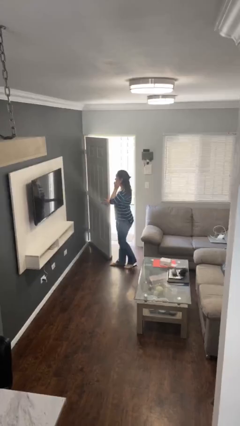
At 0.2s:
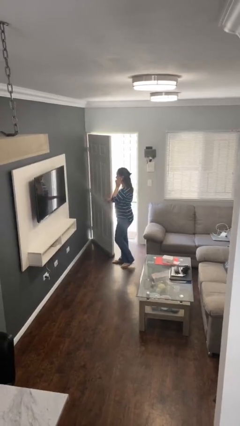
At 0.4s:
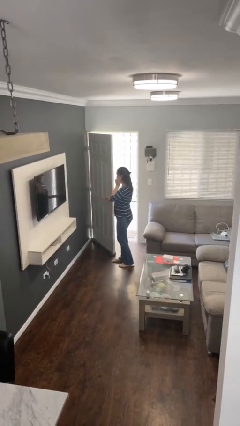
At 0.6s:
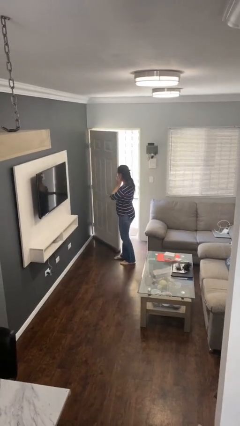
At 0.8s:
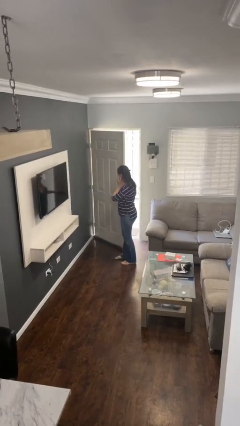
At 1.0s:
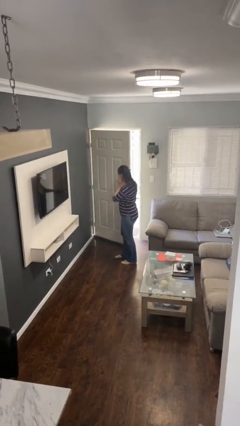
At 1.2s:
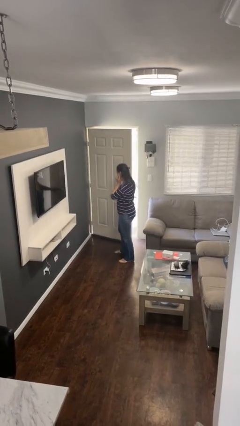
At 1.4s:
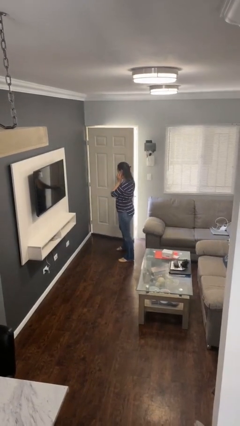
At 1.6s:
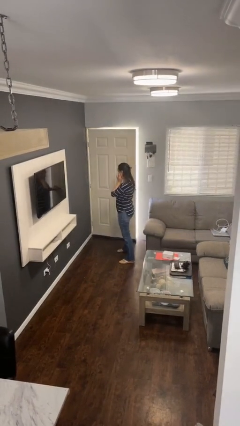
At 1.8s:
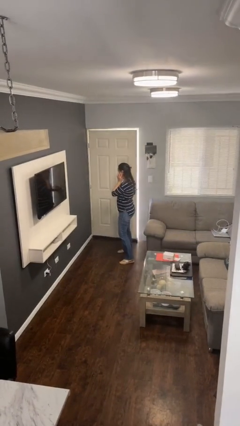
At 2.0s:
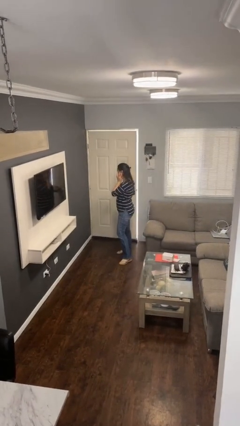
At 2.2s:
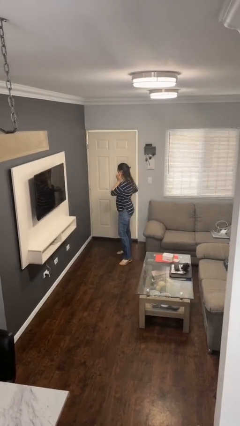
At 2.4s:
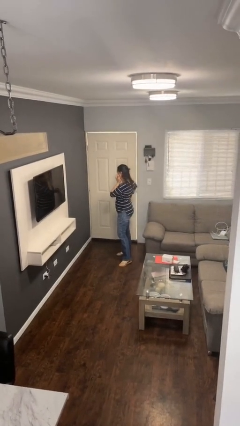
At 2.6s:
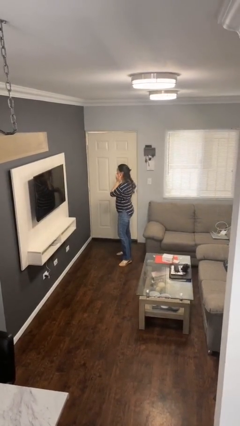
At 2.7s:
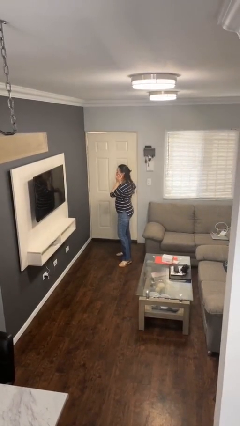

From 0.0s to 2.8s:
person closes facility door

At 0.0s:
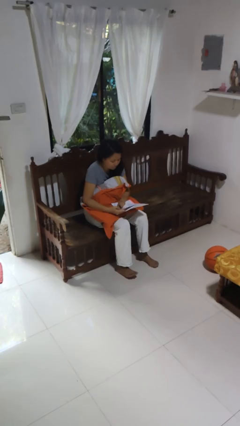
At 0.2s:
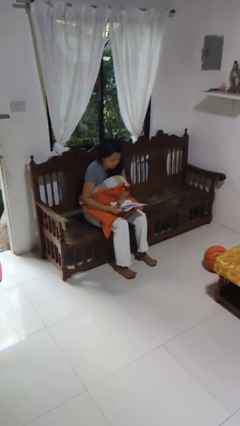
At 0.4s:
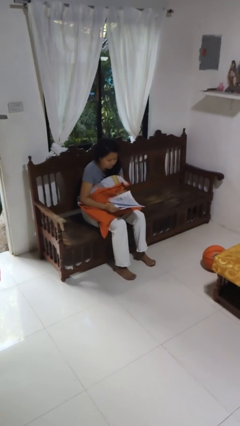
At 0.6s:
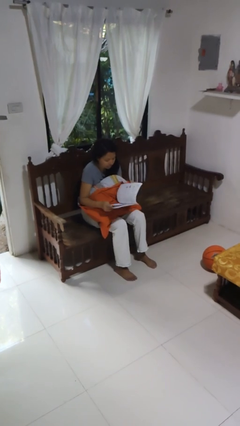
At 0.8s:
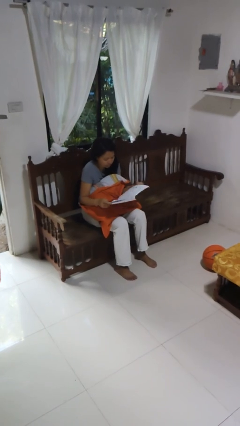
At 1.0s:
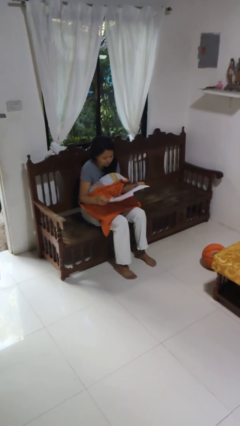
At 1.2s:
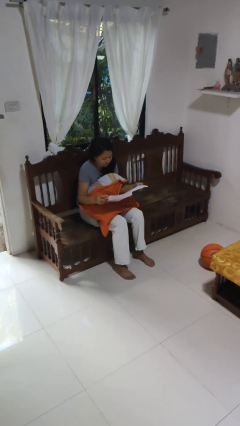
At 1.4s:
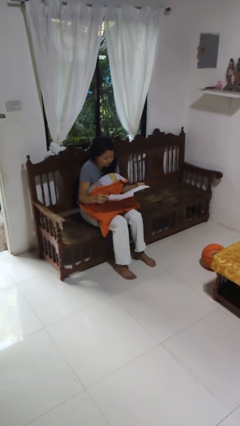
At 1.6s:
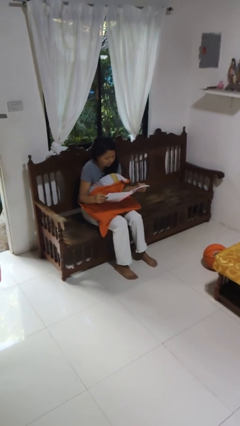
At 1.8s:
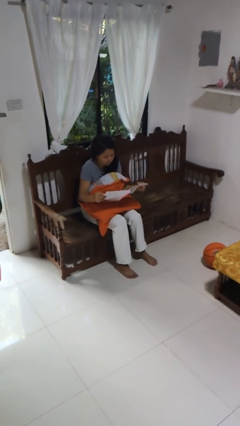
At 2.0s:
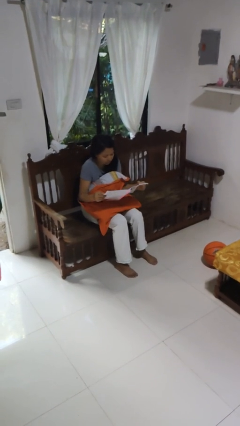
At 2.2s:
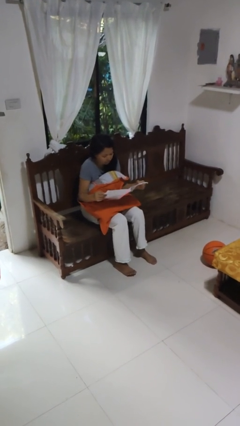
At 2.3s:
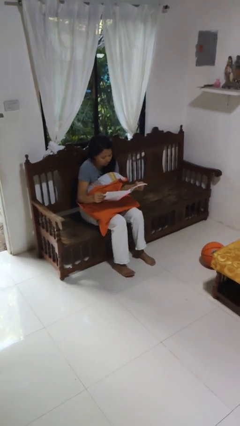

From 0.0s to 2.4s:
person reads newspaper

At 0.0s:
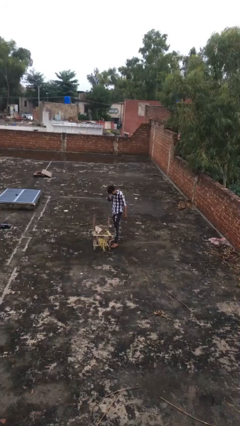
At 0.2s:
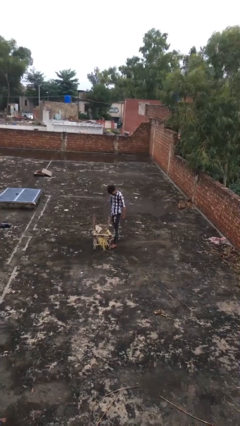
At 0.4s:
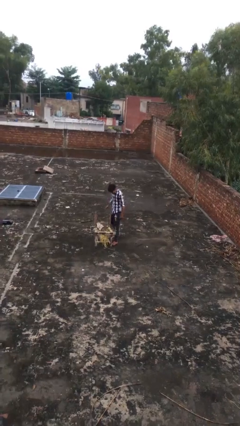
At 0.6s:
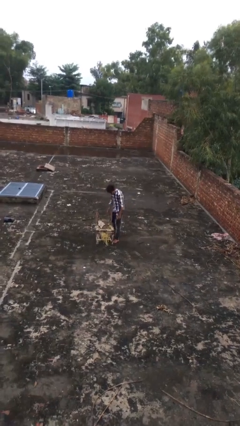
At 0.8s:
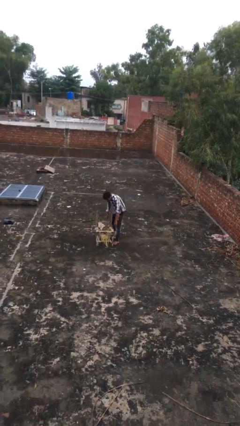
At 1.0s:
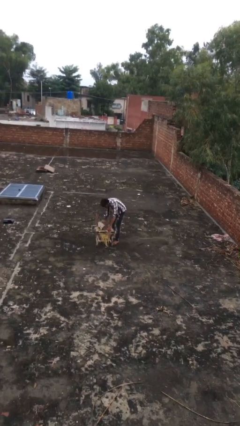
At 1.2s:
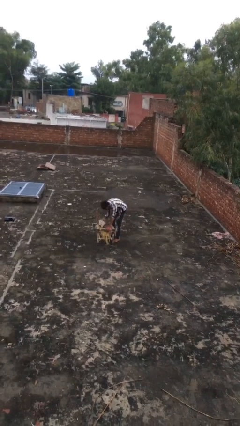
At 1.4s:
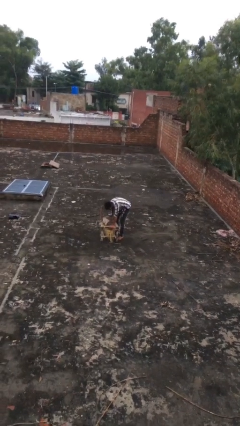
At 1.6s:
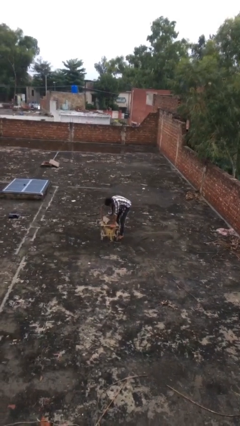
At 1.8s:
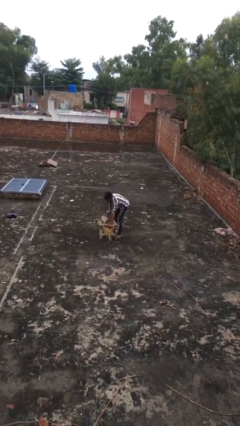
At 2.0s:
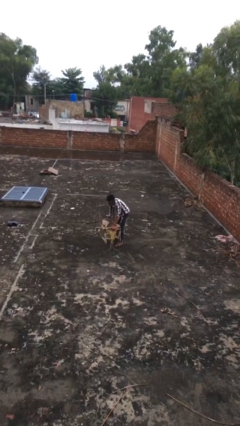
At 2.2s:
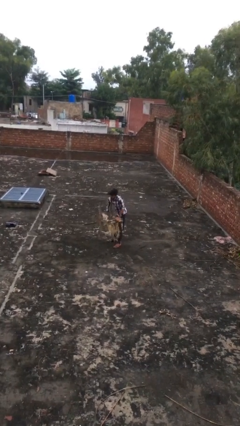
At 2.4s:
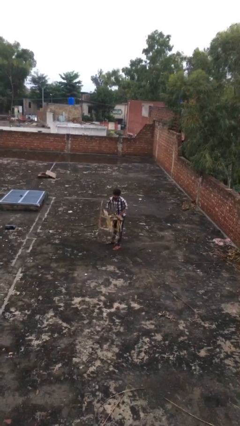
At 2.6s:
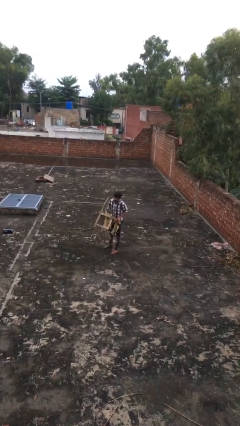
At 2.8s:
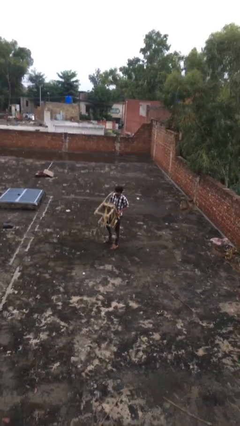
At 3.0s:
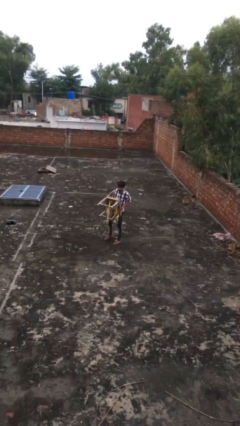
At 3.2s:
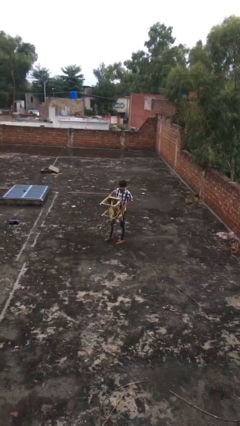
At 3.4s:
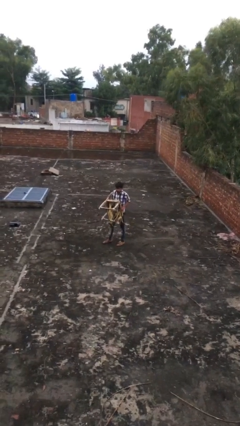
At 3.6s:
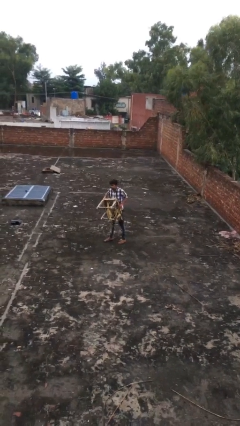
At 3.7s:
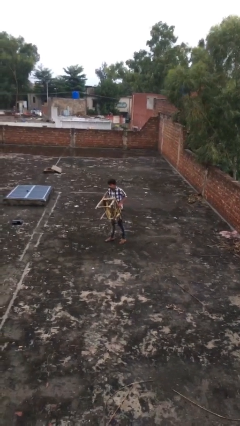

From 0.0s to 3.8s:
person picks up object from floor

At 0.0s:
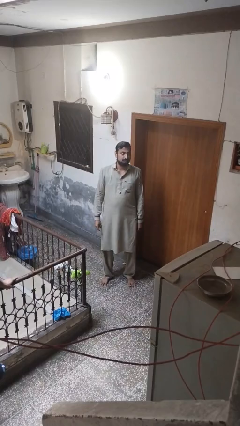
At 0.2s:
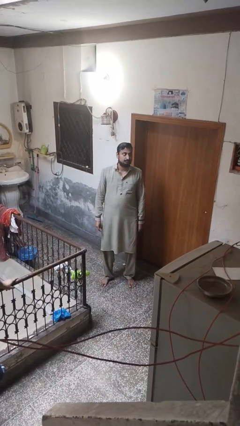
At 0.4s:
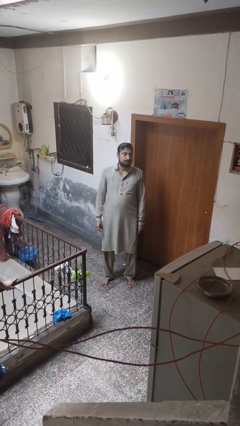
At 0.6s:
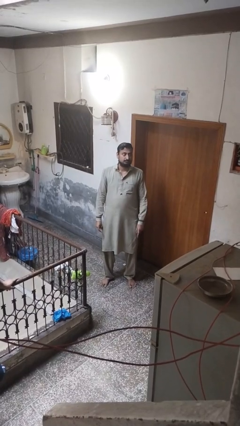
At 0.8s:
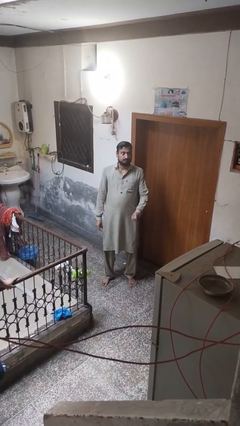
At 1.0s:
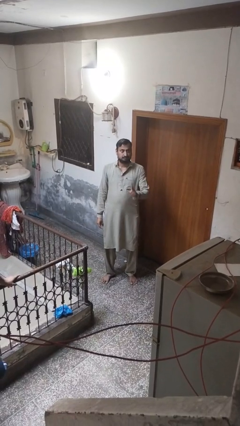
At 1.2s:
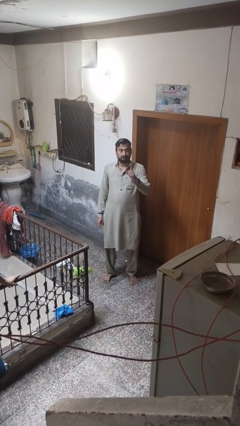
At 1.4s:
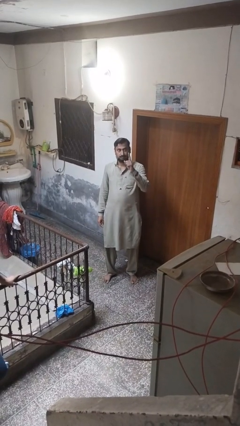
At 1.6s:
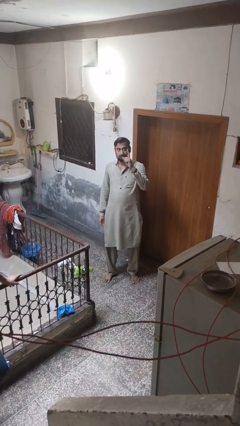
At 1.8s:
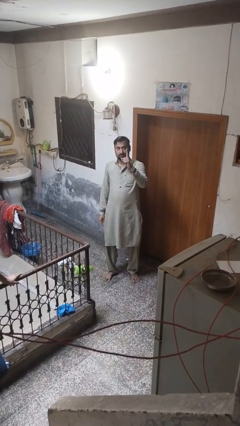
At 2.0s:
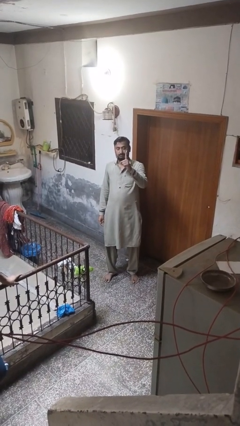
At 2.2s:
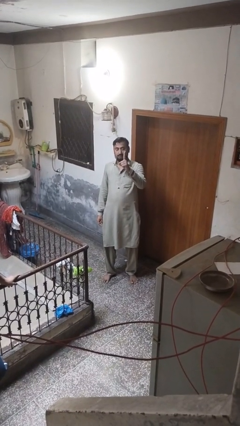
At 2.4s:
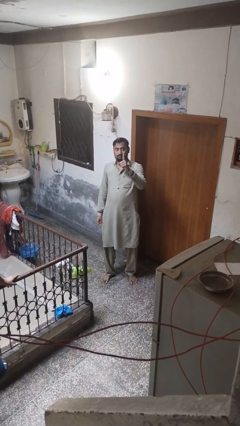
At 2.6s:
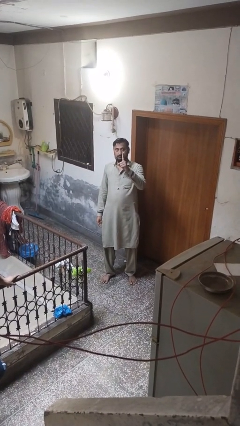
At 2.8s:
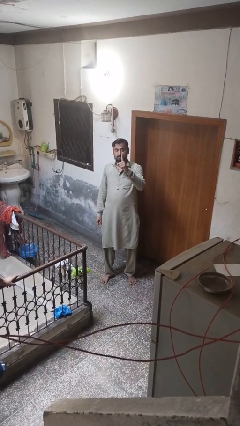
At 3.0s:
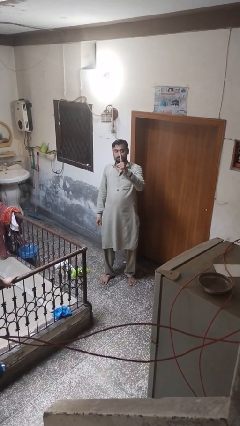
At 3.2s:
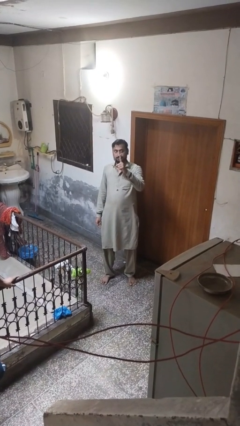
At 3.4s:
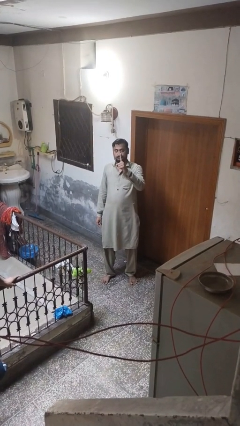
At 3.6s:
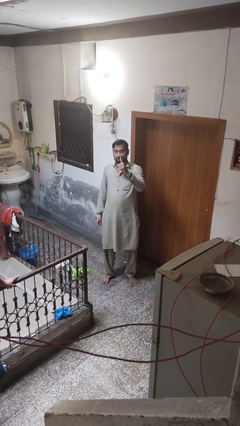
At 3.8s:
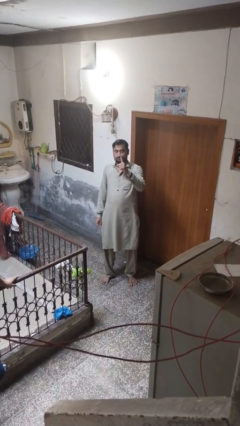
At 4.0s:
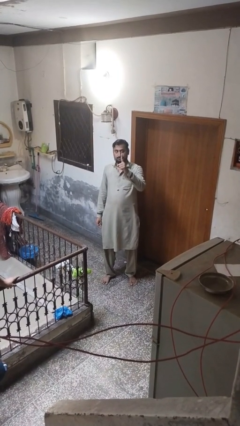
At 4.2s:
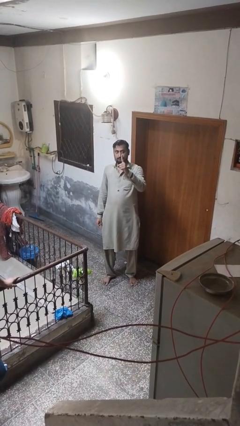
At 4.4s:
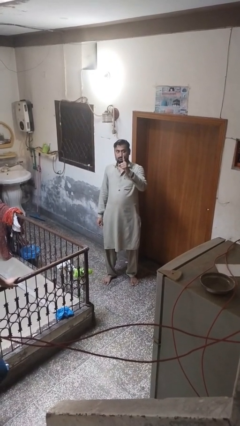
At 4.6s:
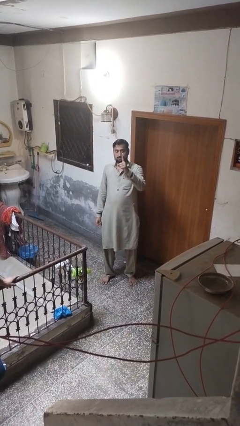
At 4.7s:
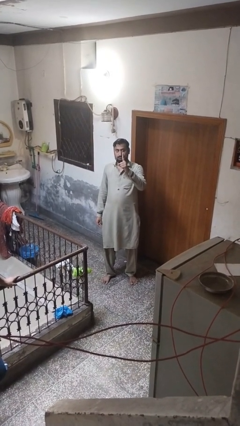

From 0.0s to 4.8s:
person gestures number one

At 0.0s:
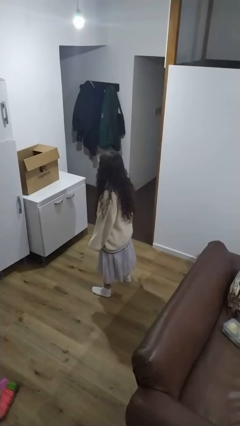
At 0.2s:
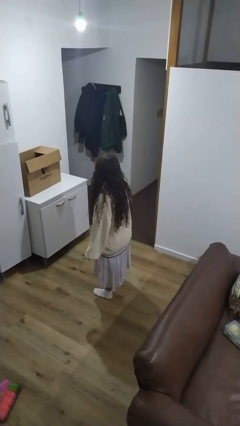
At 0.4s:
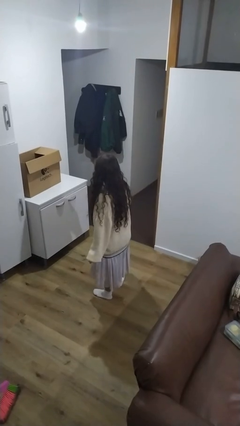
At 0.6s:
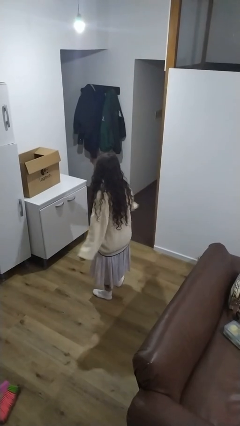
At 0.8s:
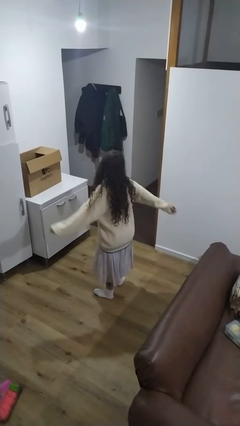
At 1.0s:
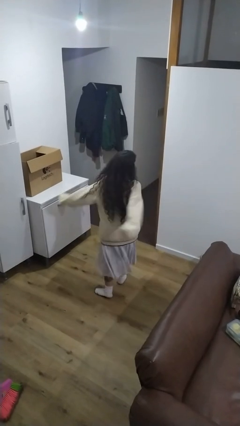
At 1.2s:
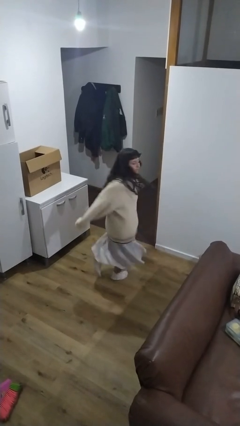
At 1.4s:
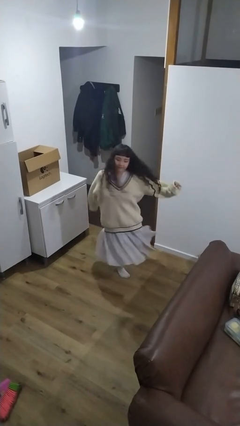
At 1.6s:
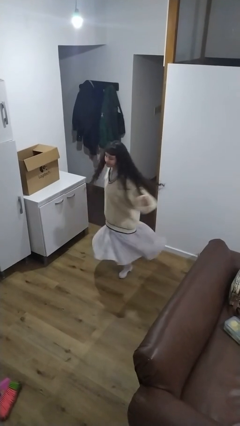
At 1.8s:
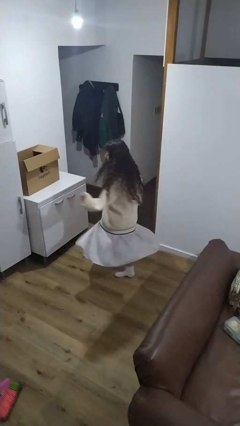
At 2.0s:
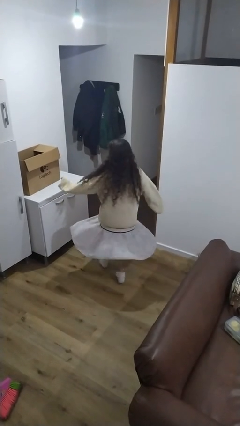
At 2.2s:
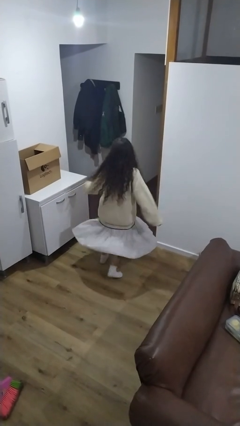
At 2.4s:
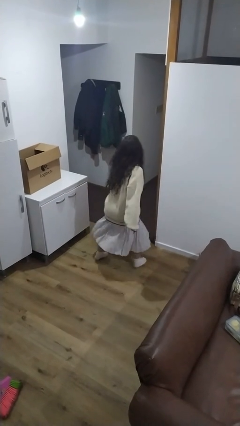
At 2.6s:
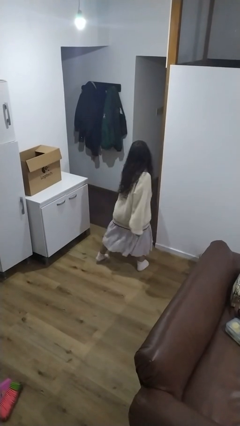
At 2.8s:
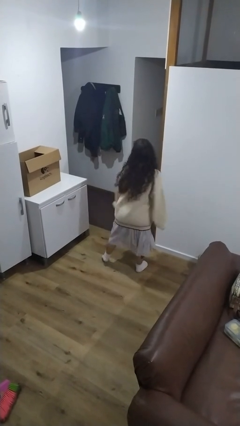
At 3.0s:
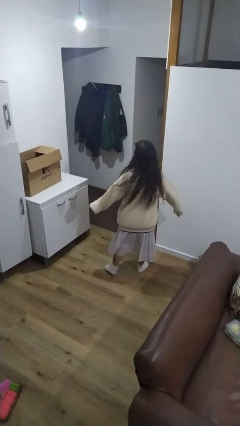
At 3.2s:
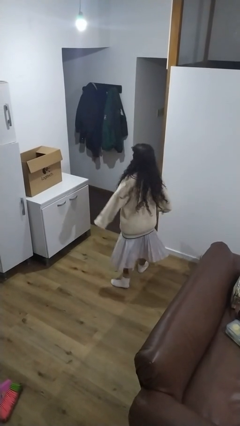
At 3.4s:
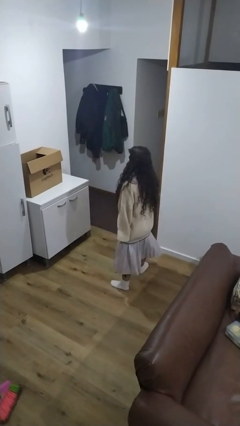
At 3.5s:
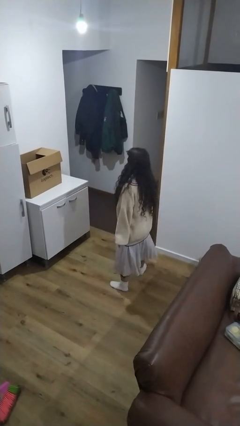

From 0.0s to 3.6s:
person twirls
